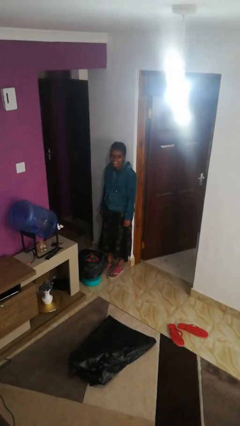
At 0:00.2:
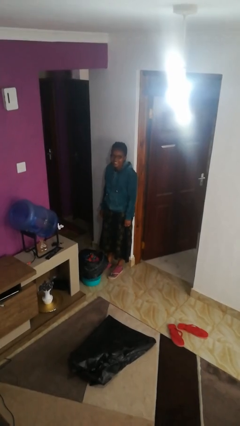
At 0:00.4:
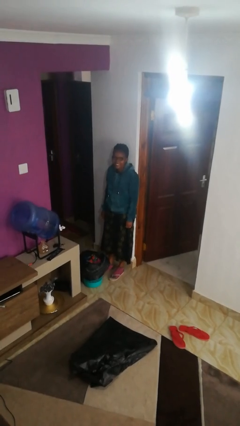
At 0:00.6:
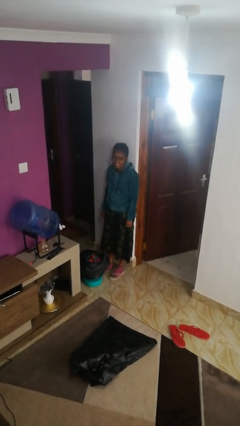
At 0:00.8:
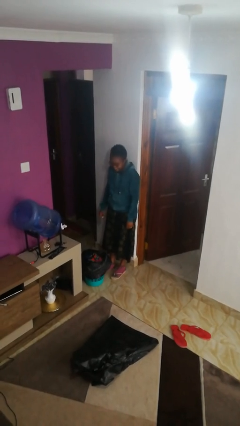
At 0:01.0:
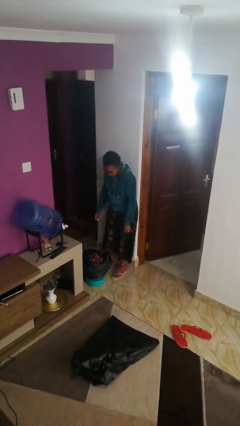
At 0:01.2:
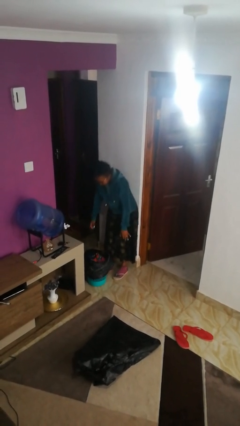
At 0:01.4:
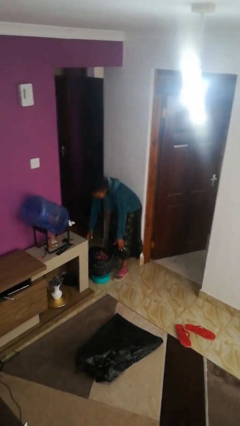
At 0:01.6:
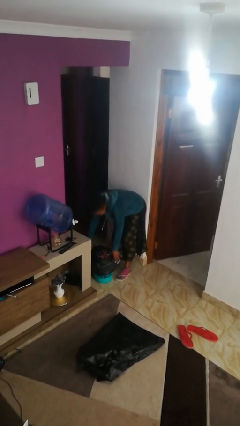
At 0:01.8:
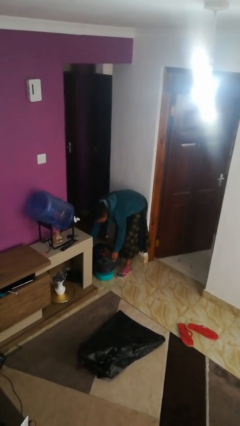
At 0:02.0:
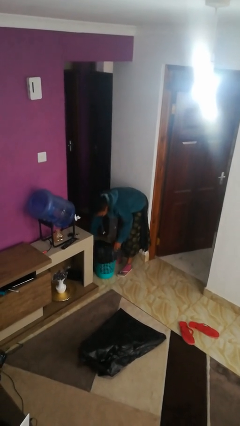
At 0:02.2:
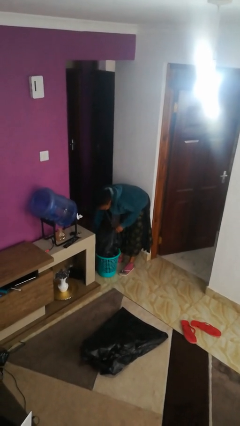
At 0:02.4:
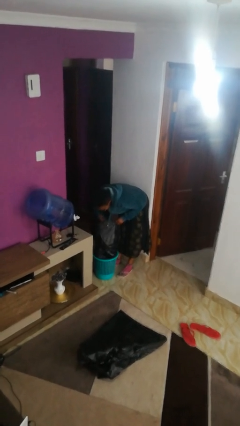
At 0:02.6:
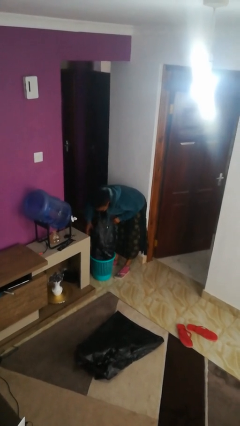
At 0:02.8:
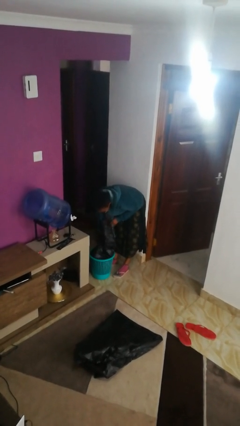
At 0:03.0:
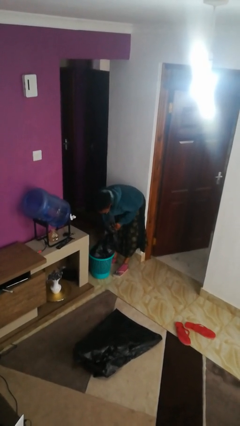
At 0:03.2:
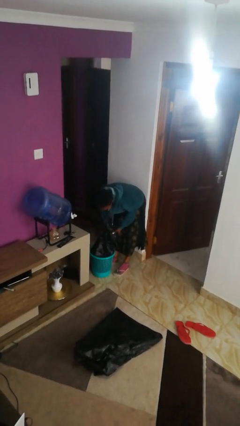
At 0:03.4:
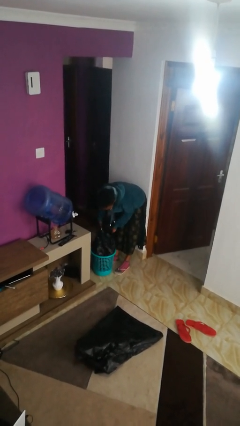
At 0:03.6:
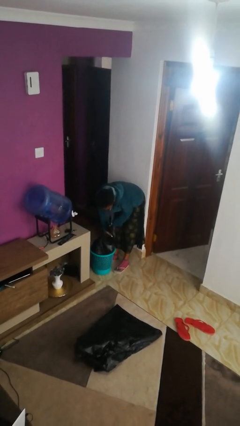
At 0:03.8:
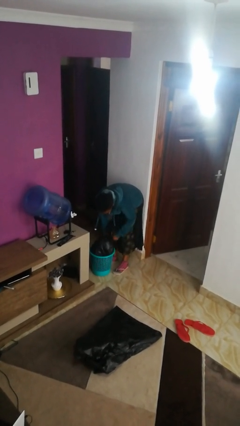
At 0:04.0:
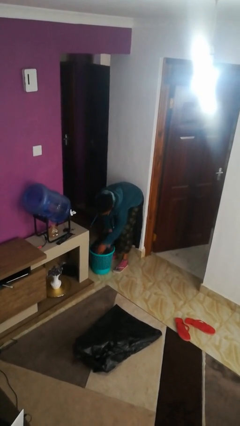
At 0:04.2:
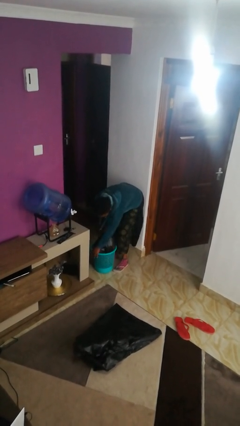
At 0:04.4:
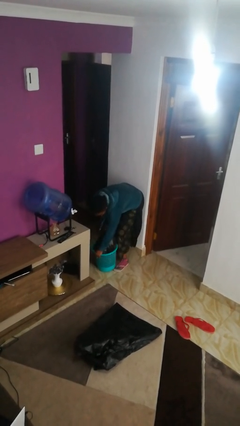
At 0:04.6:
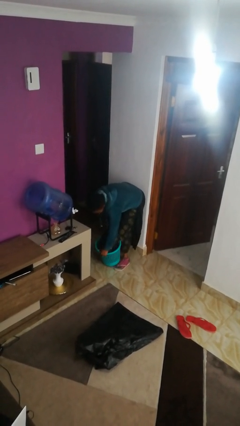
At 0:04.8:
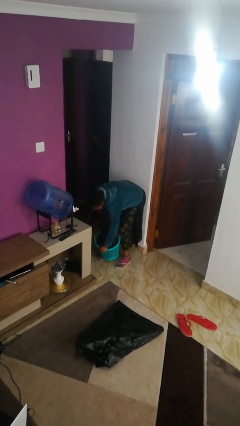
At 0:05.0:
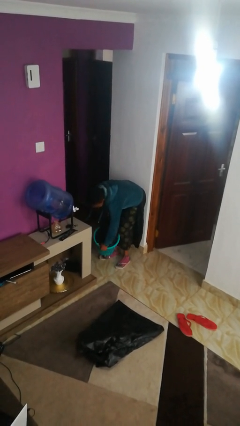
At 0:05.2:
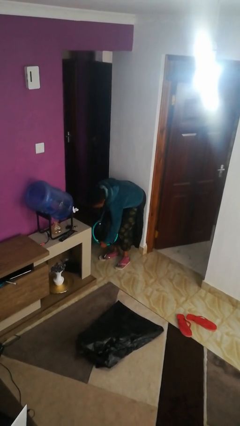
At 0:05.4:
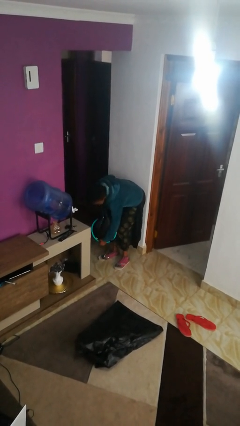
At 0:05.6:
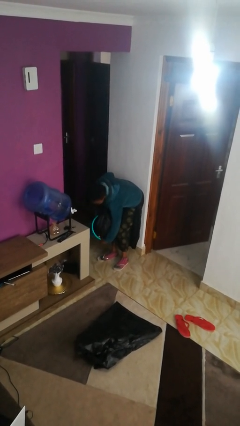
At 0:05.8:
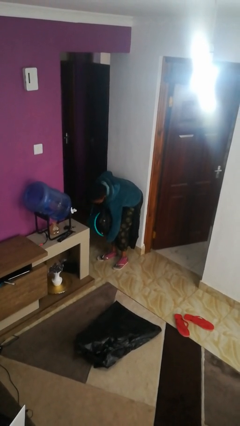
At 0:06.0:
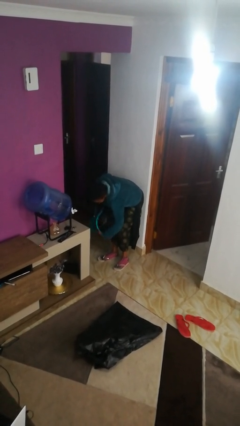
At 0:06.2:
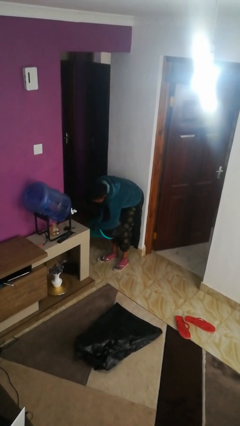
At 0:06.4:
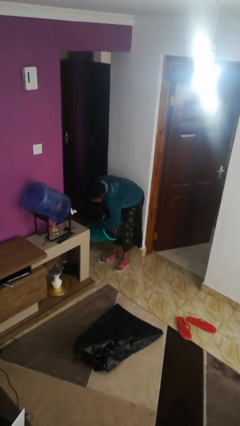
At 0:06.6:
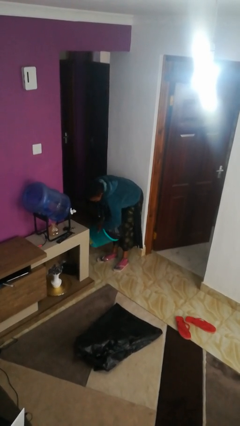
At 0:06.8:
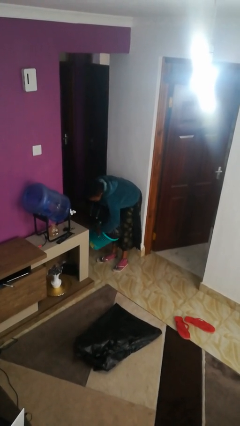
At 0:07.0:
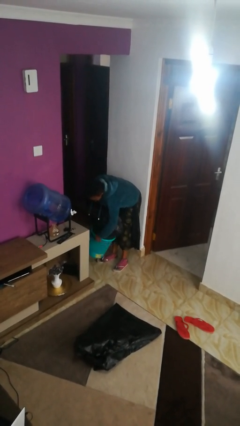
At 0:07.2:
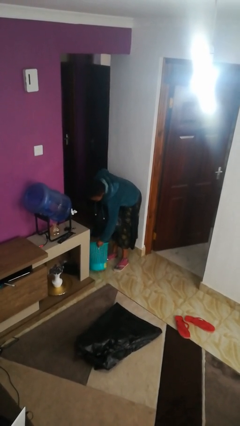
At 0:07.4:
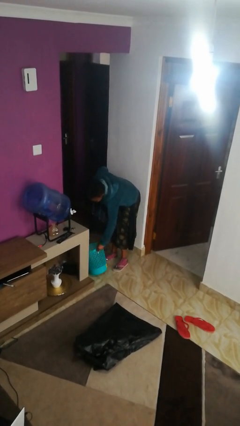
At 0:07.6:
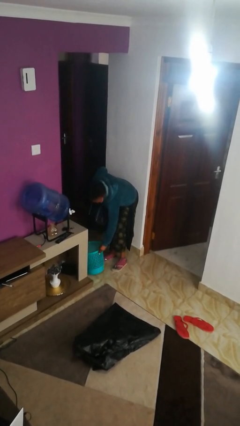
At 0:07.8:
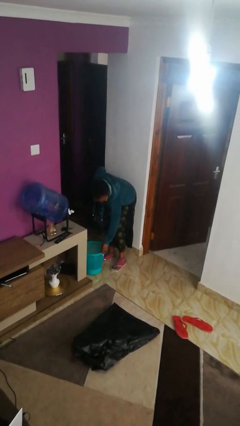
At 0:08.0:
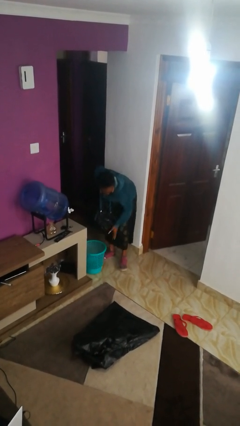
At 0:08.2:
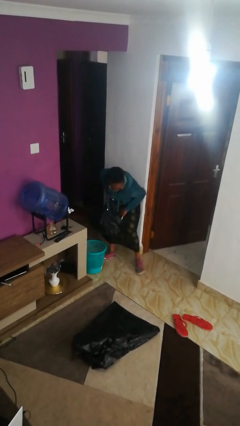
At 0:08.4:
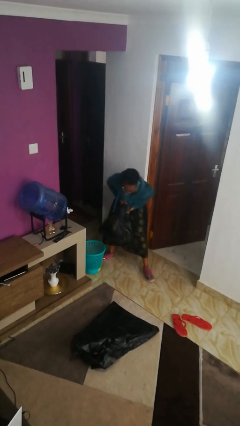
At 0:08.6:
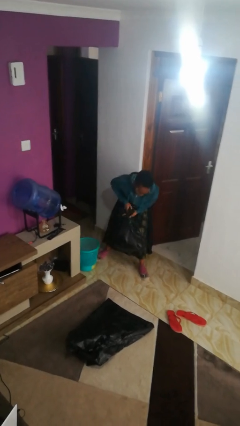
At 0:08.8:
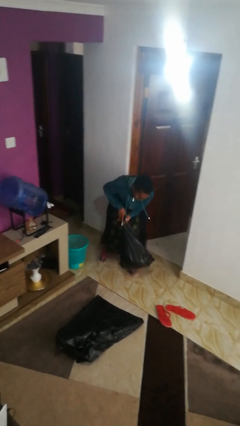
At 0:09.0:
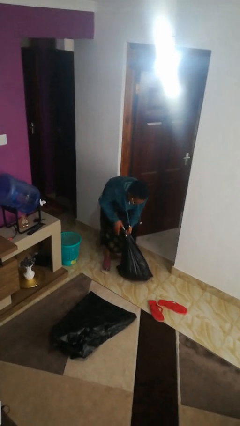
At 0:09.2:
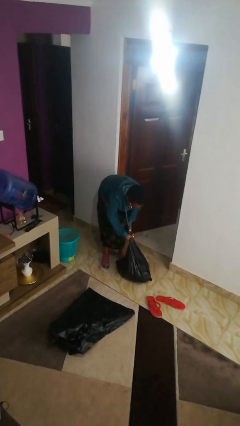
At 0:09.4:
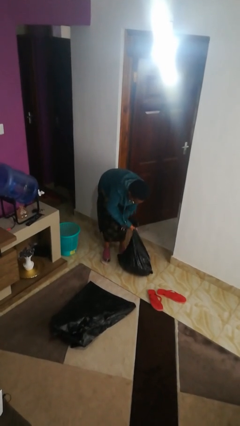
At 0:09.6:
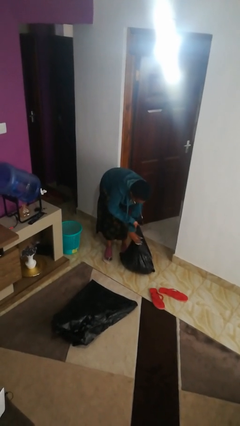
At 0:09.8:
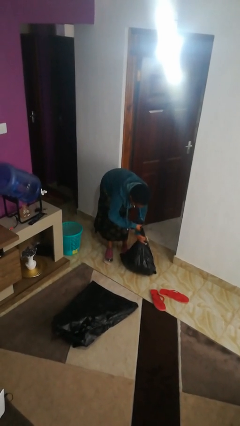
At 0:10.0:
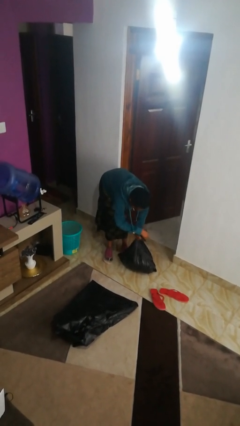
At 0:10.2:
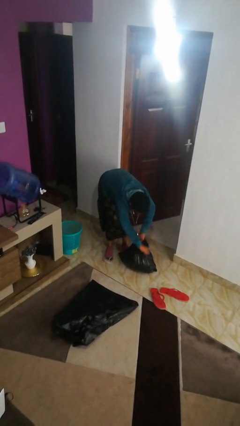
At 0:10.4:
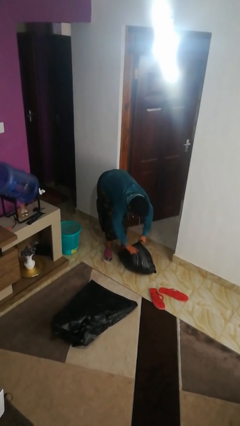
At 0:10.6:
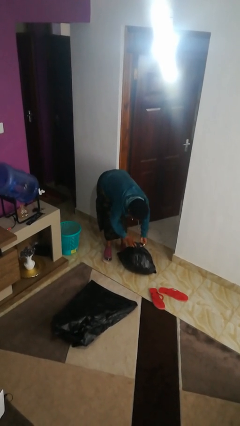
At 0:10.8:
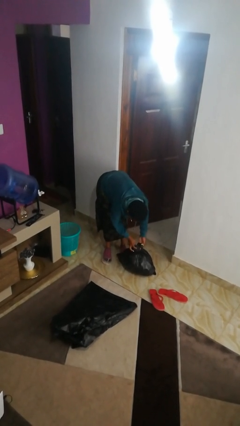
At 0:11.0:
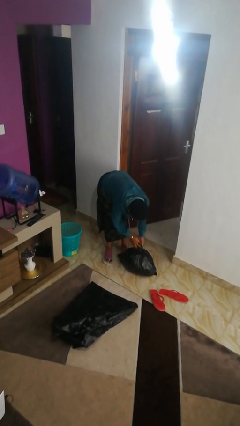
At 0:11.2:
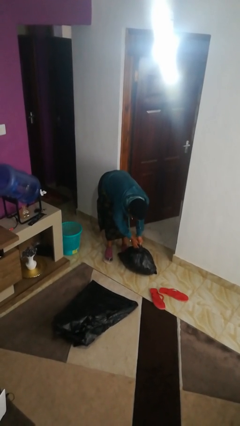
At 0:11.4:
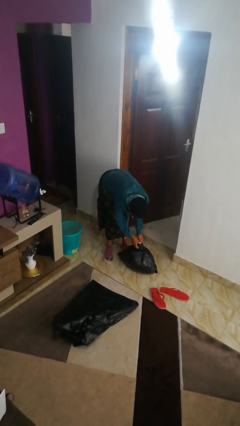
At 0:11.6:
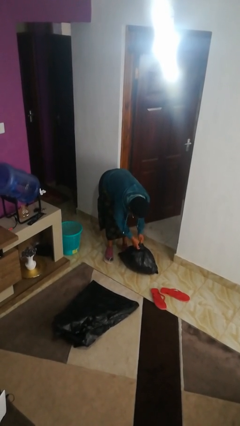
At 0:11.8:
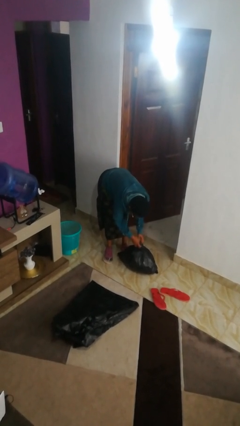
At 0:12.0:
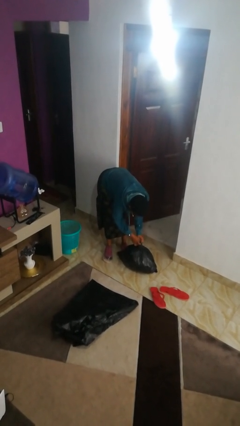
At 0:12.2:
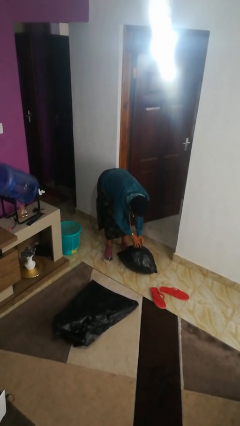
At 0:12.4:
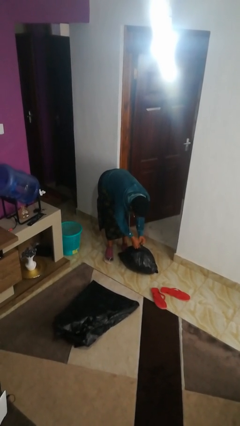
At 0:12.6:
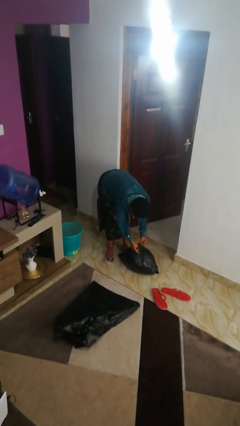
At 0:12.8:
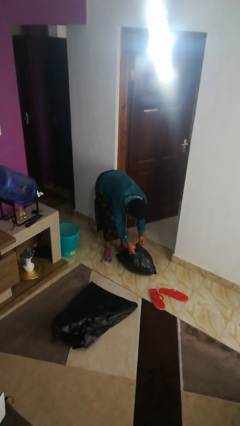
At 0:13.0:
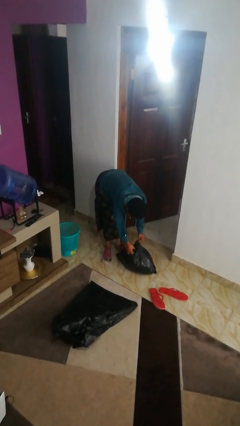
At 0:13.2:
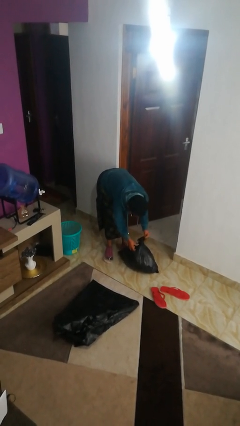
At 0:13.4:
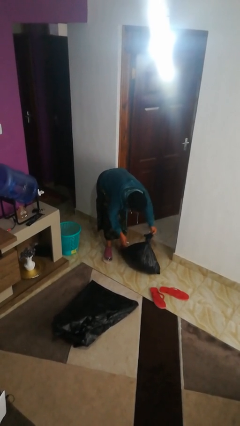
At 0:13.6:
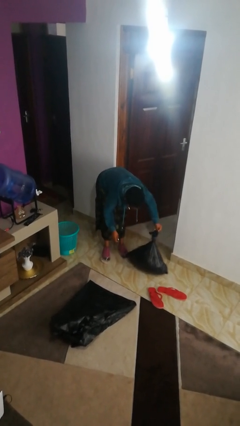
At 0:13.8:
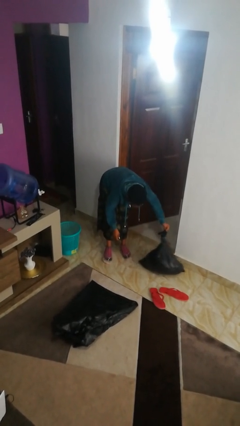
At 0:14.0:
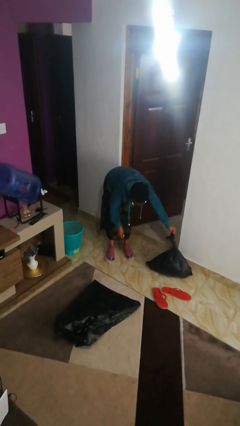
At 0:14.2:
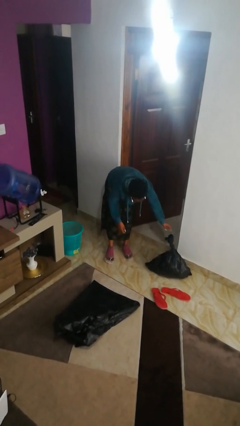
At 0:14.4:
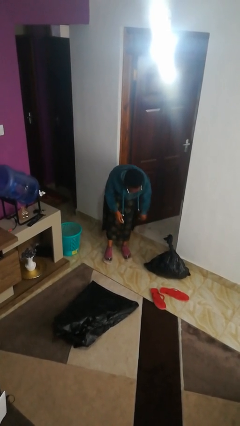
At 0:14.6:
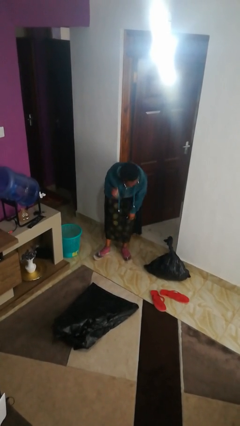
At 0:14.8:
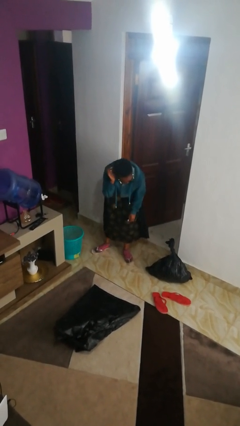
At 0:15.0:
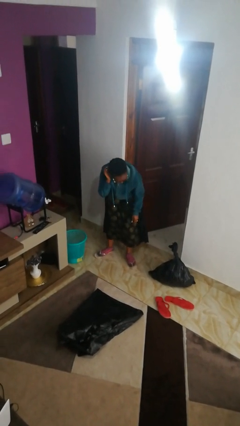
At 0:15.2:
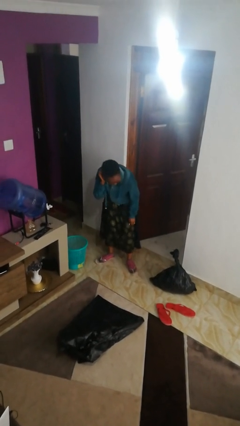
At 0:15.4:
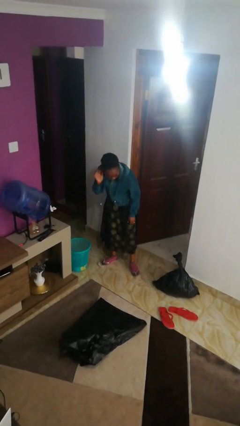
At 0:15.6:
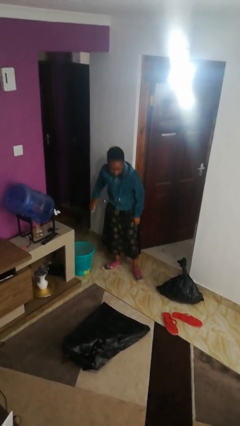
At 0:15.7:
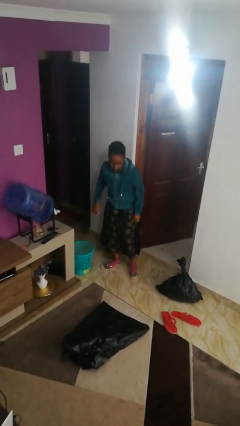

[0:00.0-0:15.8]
person removes trashbag from trashcan

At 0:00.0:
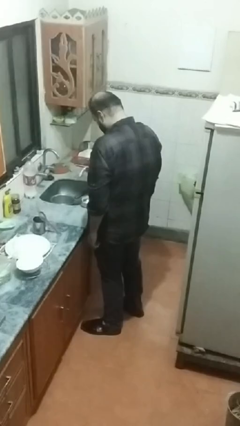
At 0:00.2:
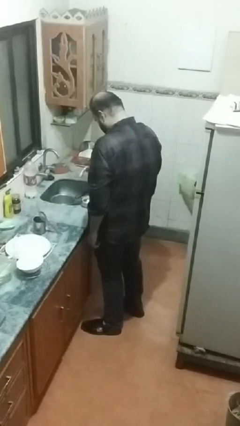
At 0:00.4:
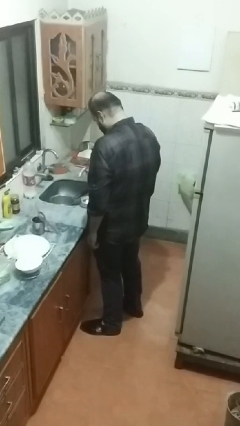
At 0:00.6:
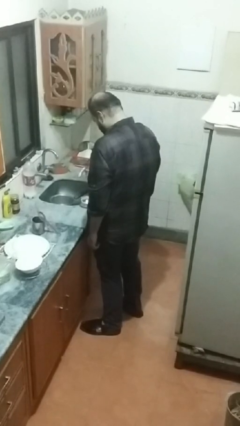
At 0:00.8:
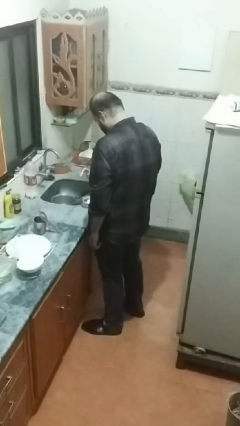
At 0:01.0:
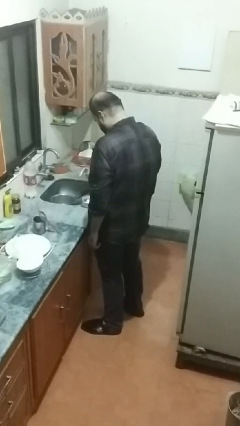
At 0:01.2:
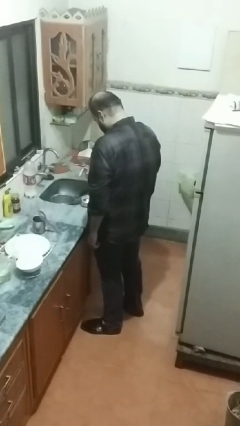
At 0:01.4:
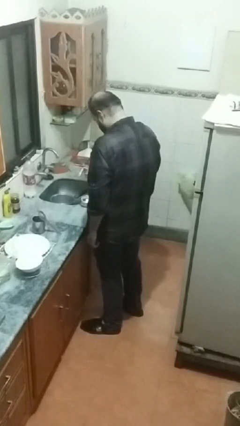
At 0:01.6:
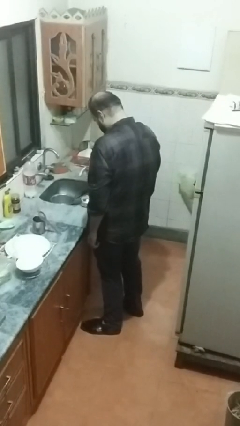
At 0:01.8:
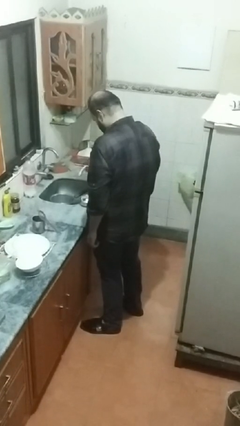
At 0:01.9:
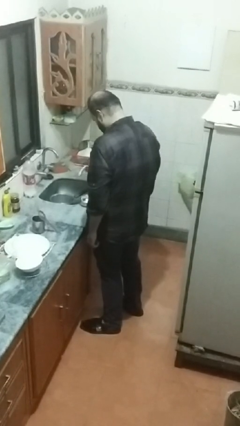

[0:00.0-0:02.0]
person pours into bowl

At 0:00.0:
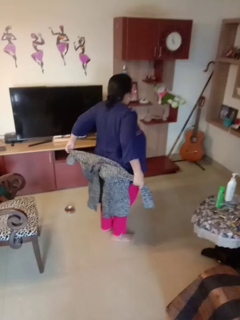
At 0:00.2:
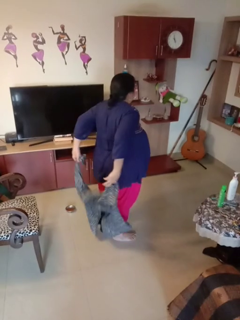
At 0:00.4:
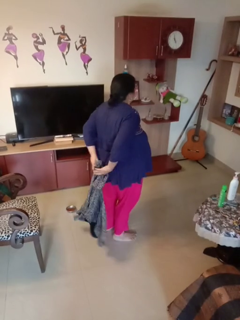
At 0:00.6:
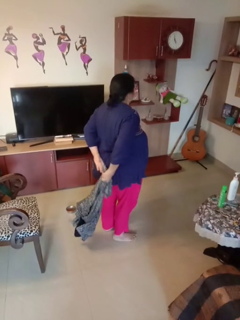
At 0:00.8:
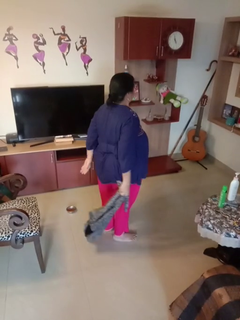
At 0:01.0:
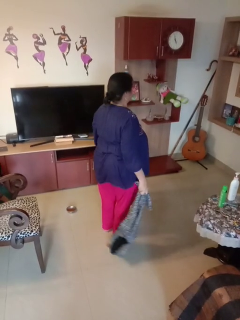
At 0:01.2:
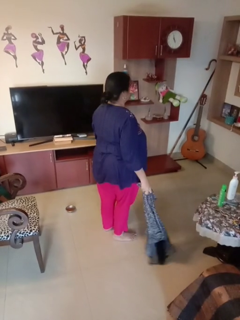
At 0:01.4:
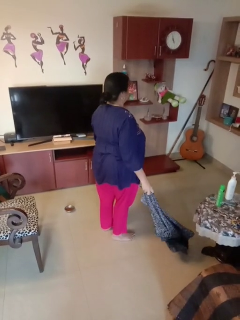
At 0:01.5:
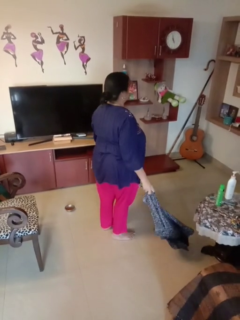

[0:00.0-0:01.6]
person unties jacket around waist
